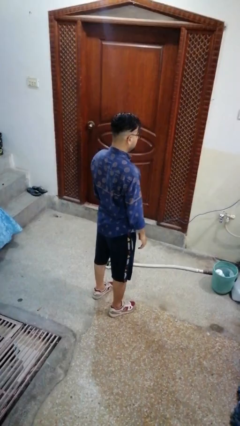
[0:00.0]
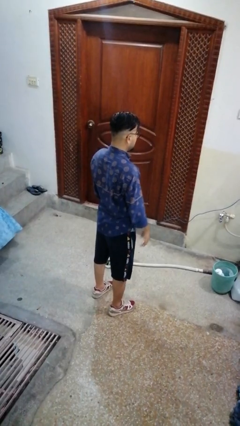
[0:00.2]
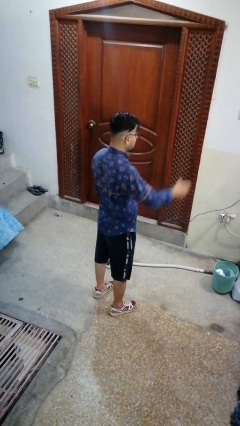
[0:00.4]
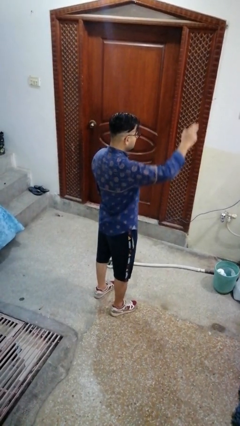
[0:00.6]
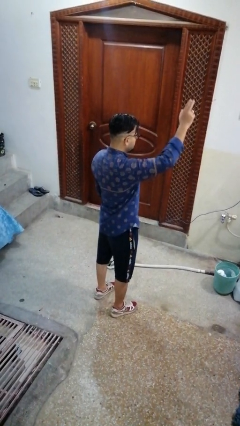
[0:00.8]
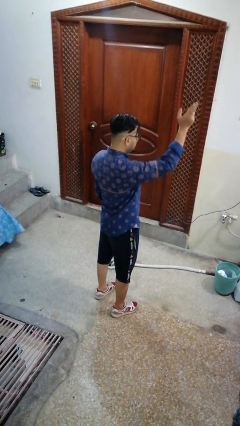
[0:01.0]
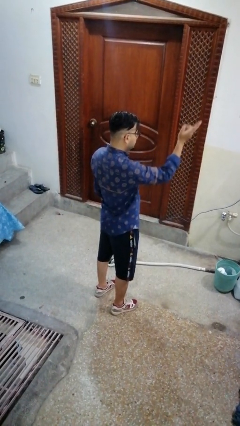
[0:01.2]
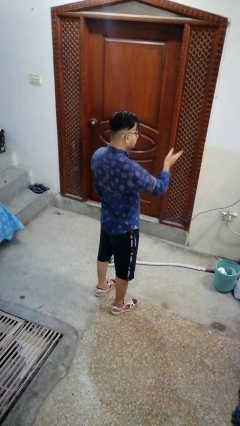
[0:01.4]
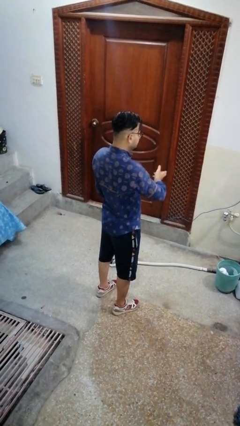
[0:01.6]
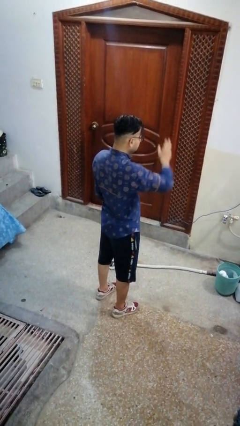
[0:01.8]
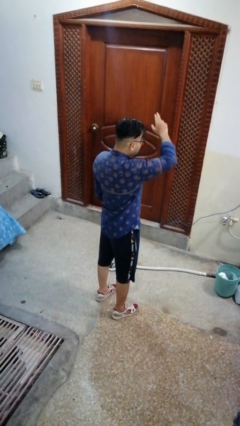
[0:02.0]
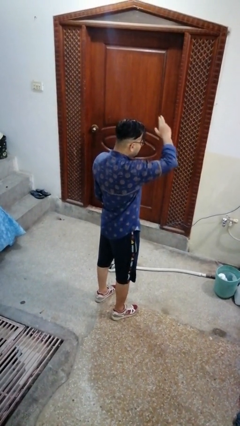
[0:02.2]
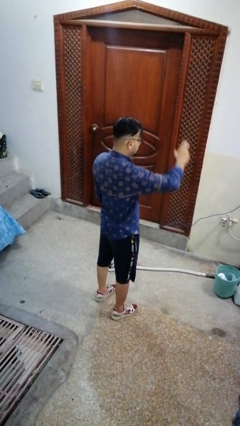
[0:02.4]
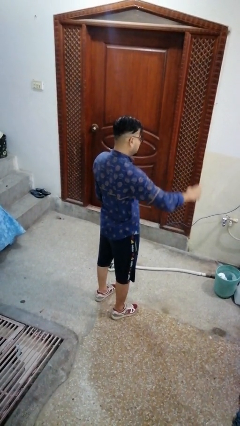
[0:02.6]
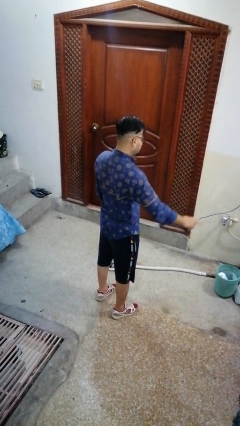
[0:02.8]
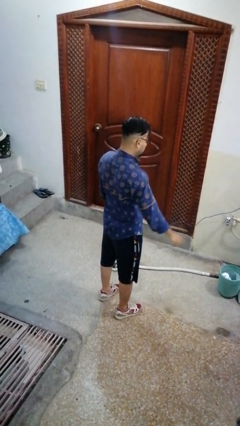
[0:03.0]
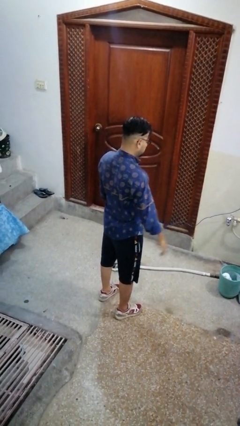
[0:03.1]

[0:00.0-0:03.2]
person gestures cut

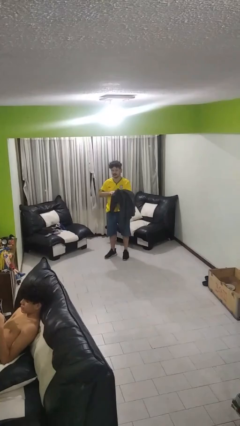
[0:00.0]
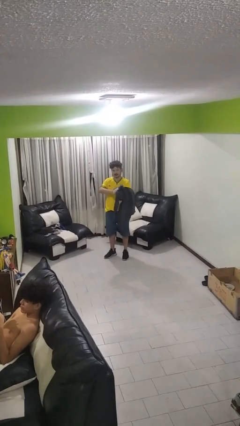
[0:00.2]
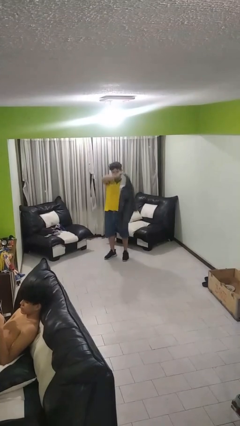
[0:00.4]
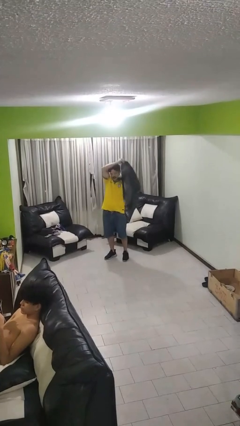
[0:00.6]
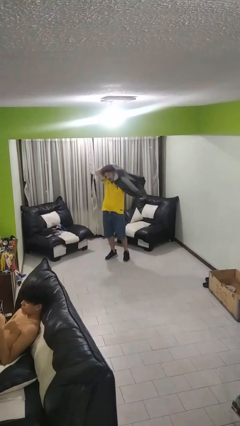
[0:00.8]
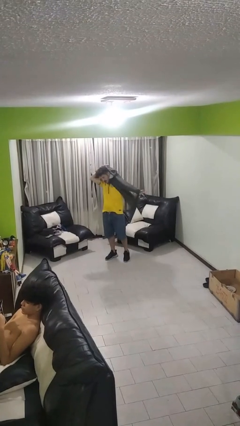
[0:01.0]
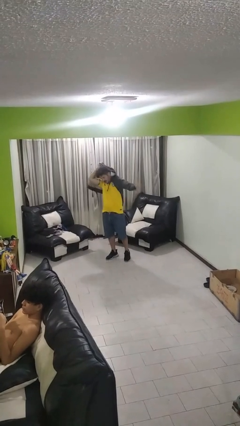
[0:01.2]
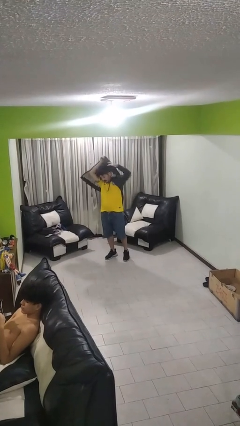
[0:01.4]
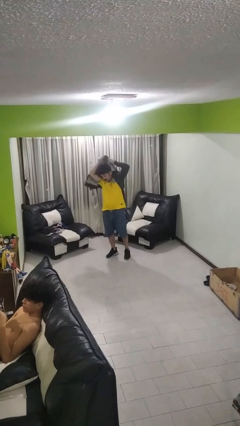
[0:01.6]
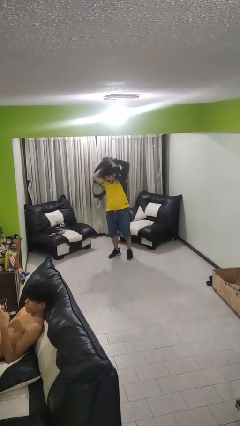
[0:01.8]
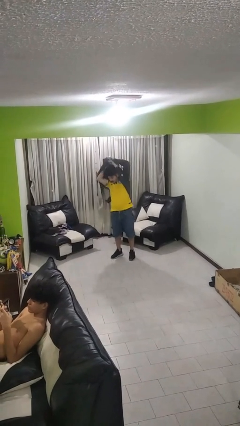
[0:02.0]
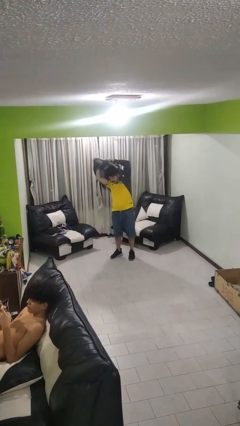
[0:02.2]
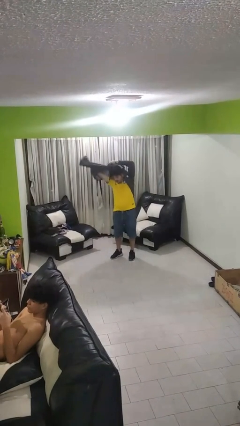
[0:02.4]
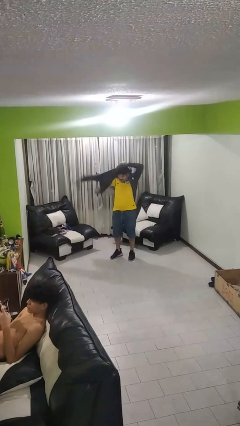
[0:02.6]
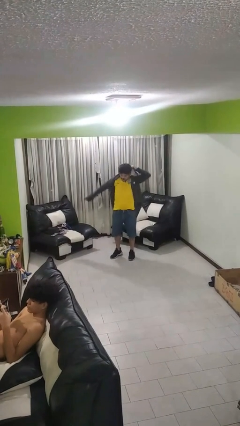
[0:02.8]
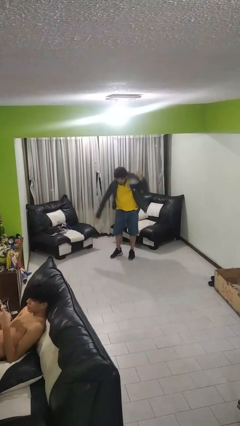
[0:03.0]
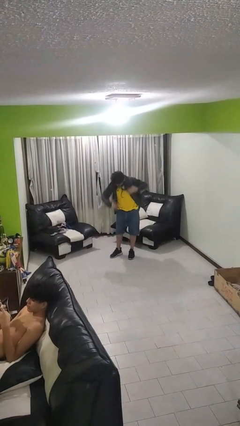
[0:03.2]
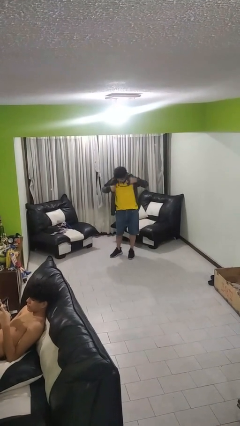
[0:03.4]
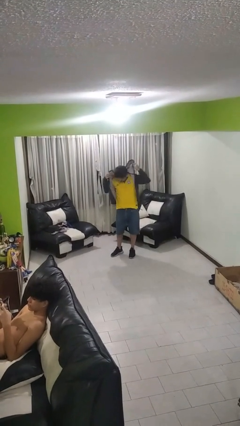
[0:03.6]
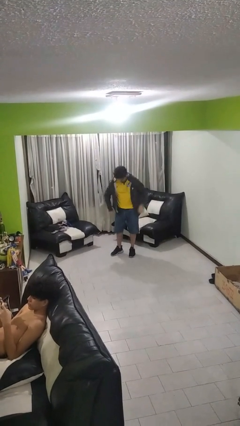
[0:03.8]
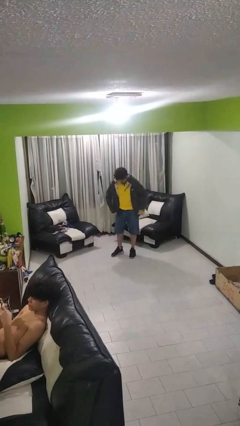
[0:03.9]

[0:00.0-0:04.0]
person puts on jacket

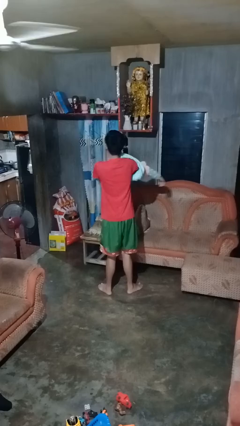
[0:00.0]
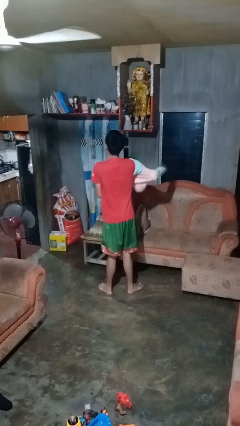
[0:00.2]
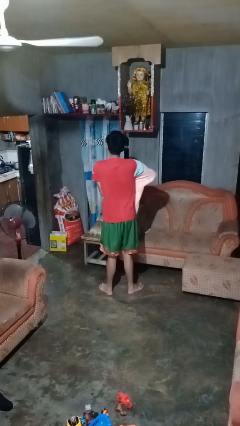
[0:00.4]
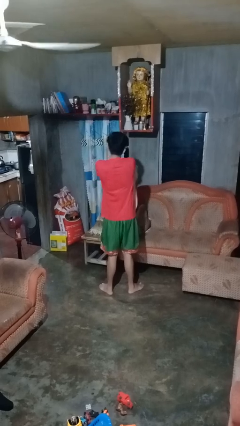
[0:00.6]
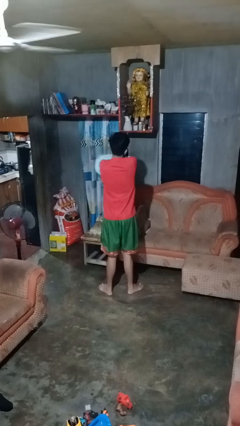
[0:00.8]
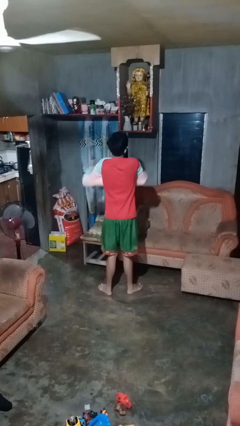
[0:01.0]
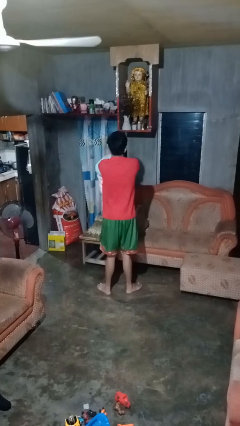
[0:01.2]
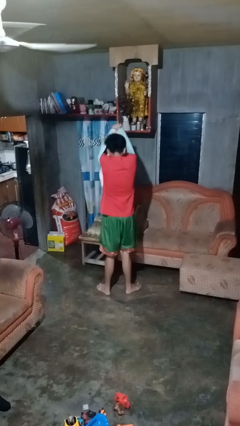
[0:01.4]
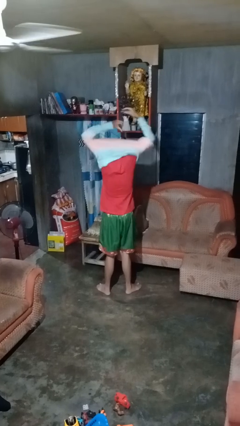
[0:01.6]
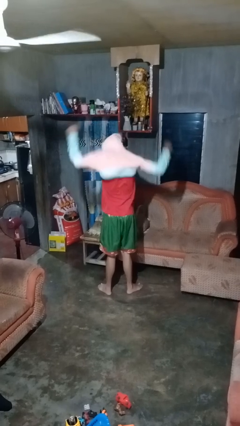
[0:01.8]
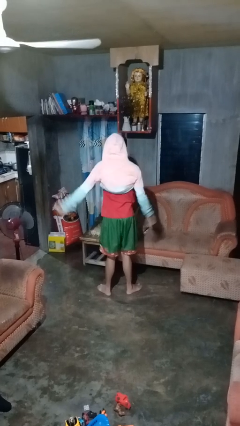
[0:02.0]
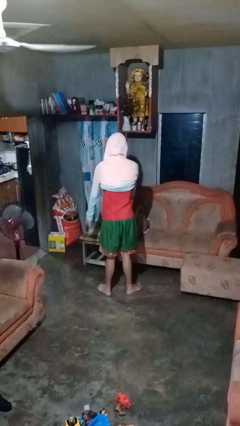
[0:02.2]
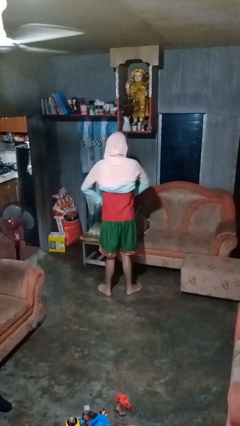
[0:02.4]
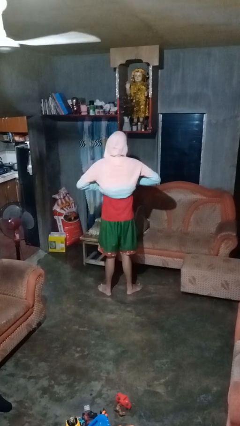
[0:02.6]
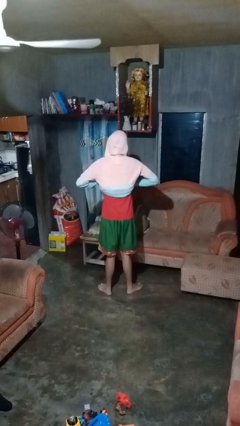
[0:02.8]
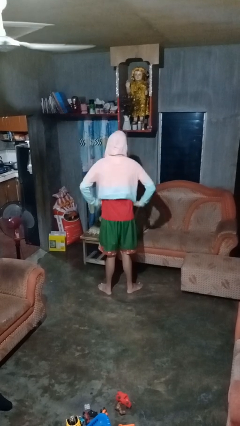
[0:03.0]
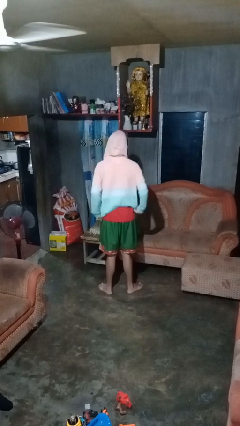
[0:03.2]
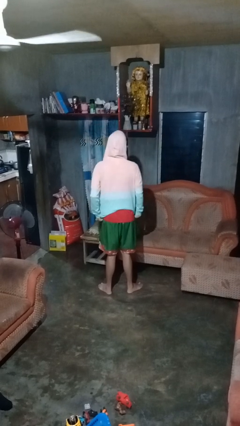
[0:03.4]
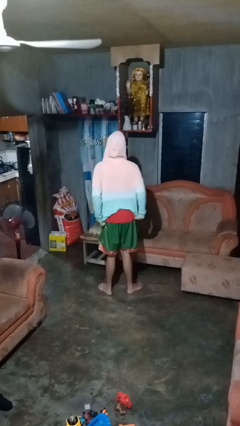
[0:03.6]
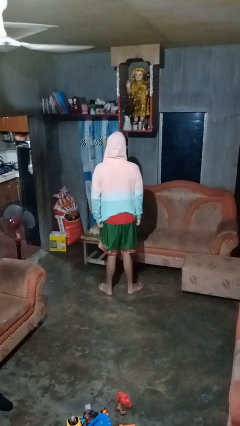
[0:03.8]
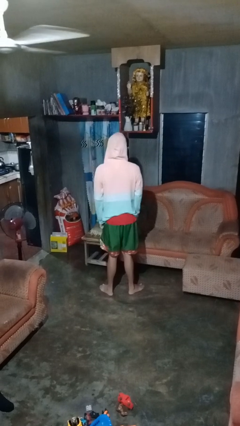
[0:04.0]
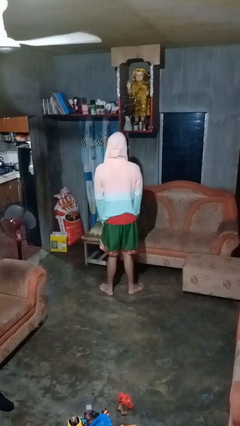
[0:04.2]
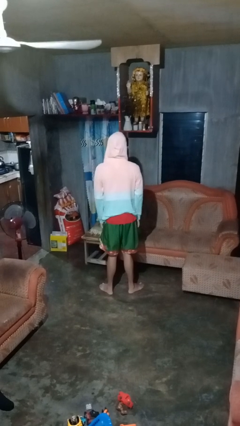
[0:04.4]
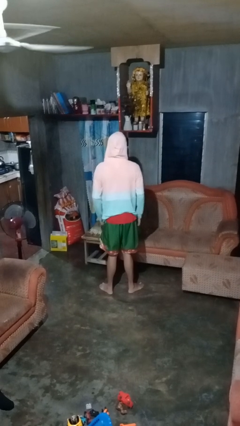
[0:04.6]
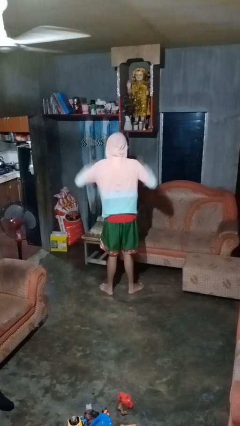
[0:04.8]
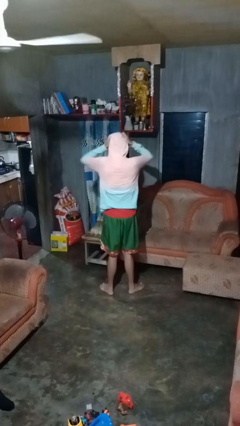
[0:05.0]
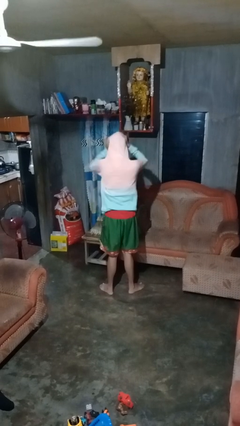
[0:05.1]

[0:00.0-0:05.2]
person puts on hoodie

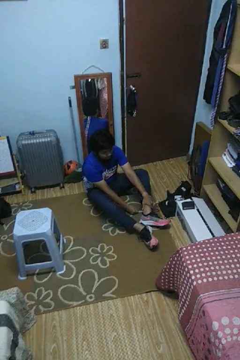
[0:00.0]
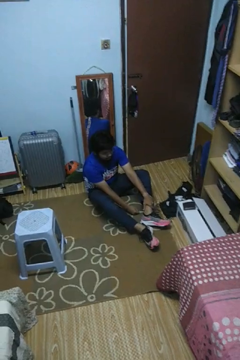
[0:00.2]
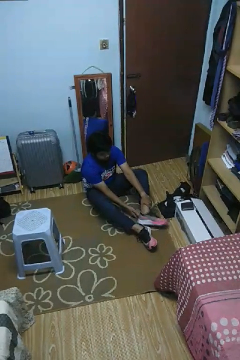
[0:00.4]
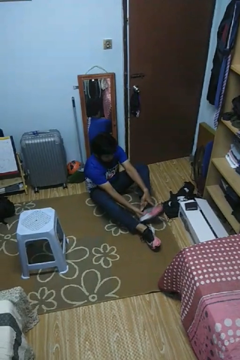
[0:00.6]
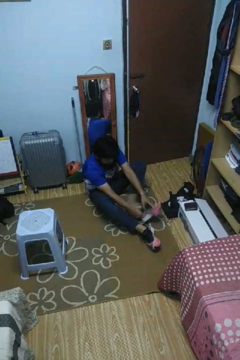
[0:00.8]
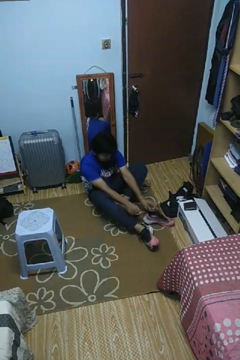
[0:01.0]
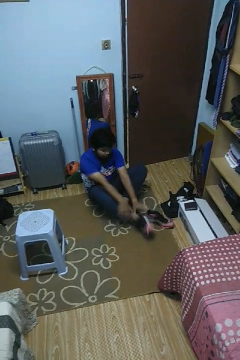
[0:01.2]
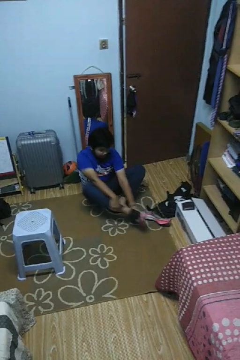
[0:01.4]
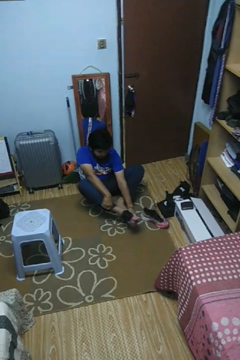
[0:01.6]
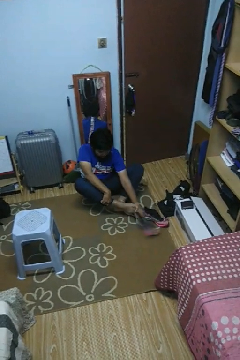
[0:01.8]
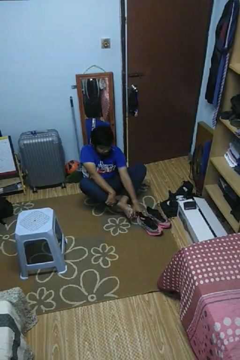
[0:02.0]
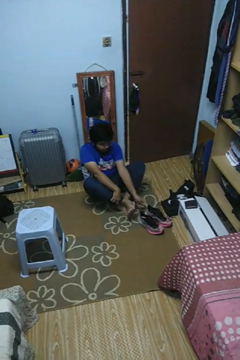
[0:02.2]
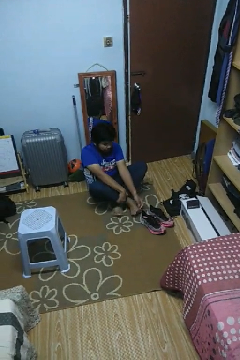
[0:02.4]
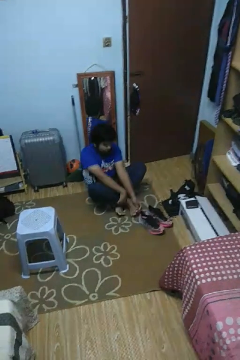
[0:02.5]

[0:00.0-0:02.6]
person takes off shoes

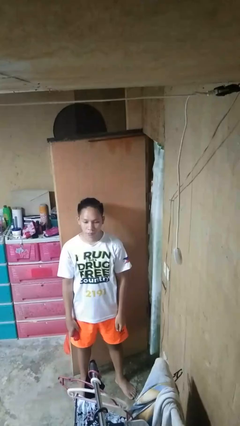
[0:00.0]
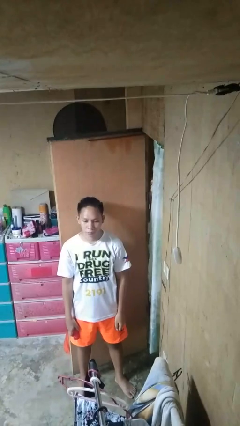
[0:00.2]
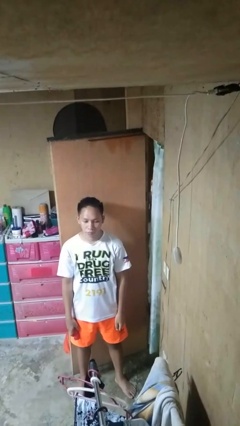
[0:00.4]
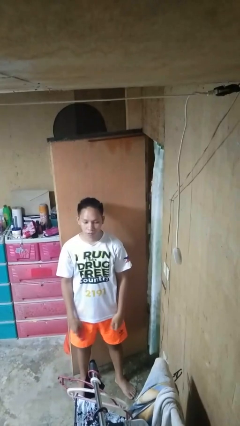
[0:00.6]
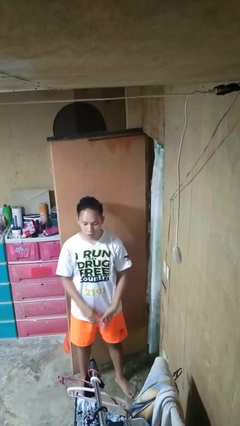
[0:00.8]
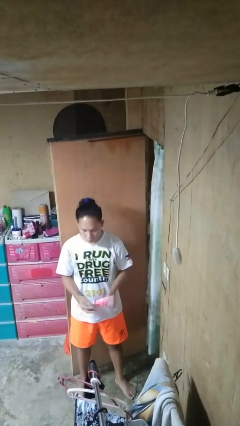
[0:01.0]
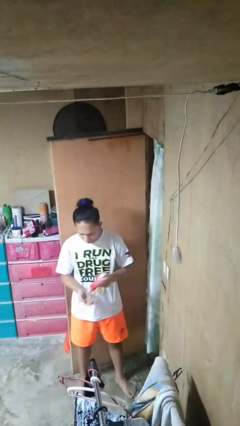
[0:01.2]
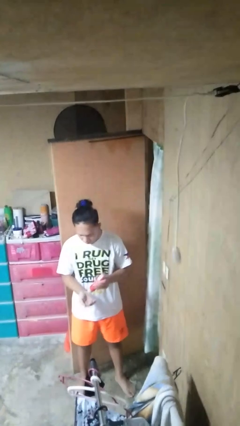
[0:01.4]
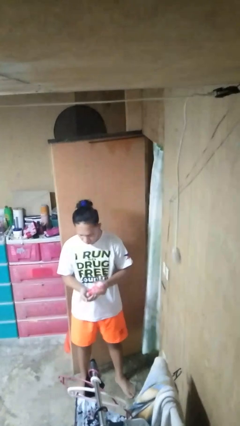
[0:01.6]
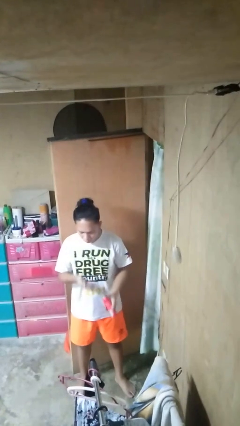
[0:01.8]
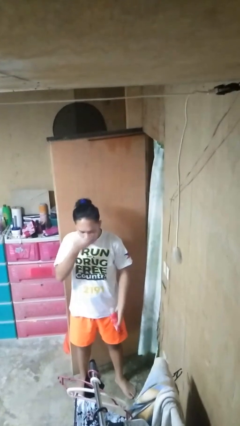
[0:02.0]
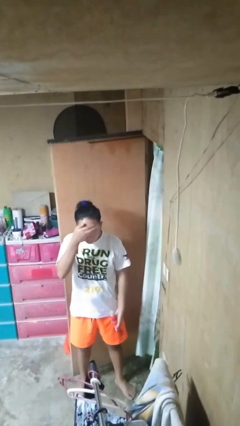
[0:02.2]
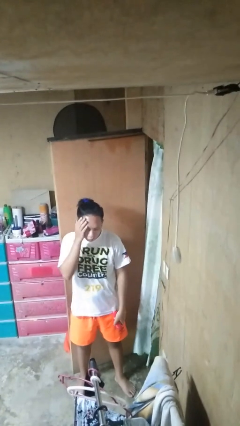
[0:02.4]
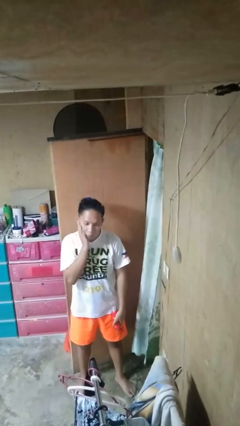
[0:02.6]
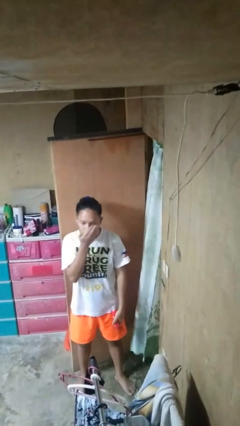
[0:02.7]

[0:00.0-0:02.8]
person applies facial moisturizer
